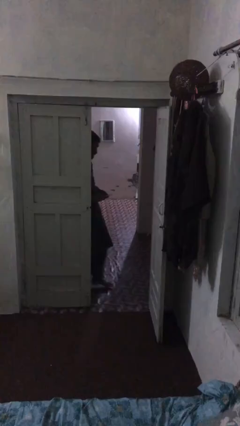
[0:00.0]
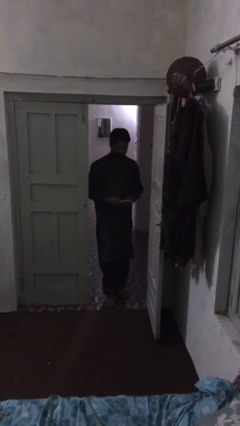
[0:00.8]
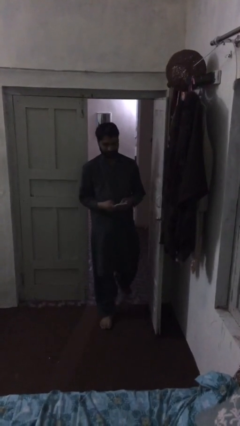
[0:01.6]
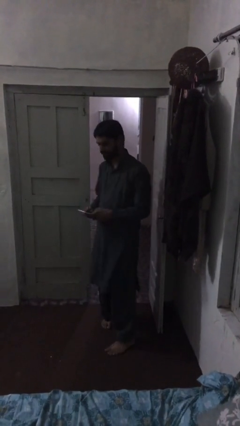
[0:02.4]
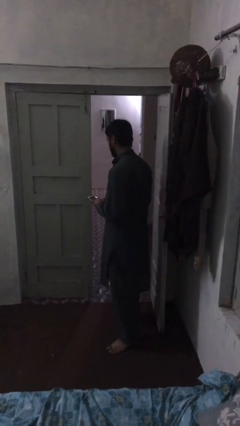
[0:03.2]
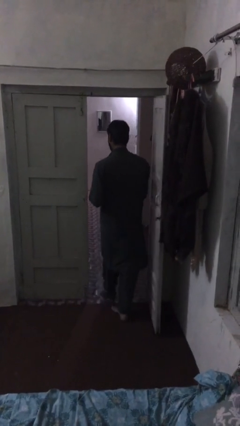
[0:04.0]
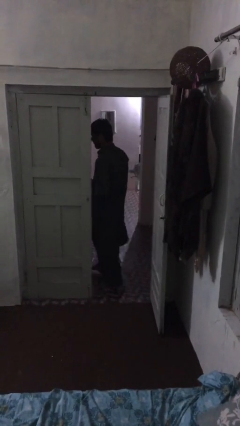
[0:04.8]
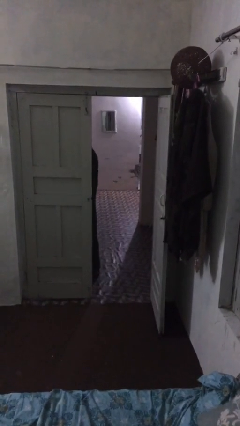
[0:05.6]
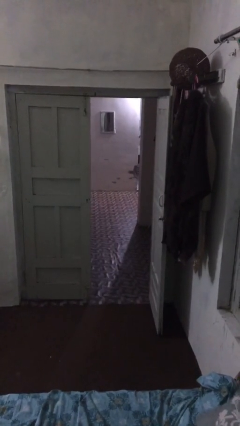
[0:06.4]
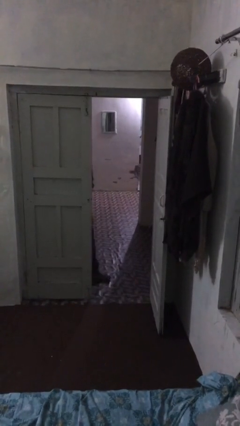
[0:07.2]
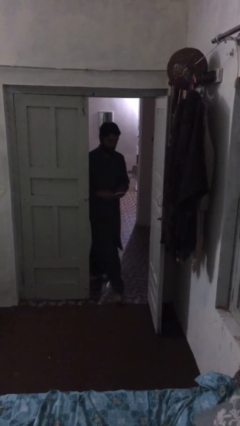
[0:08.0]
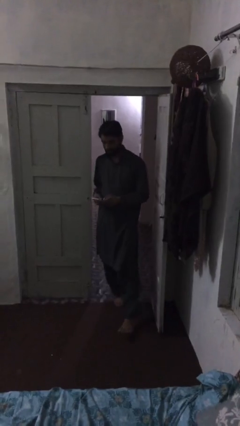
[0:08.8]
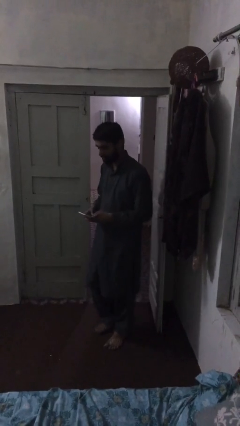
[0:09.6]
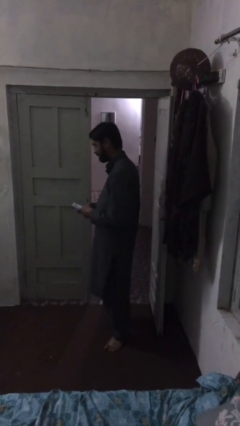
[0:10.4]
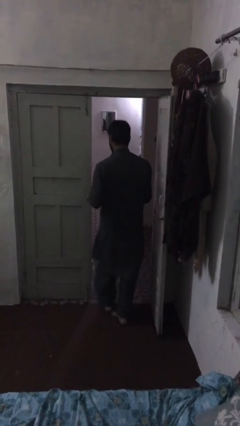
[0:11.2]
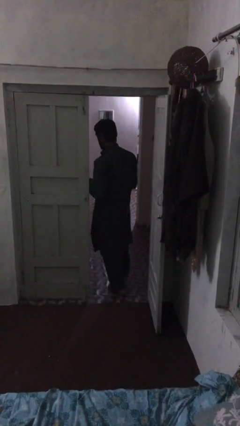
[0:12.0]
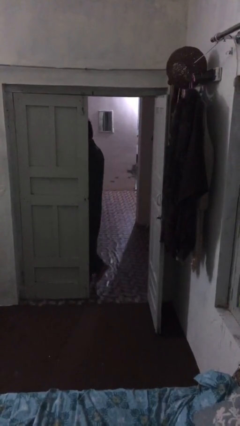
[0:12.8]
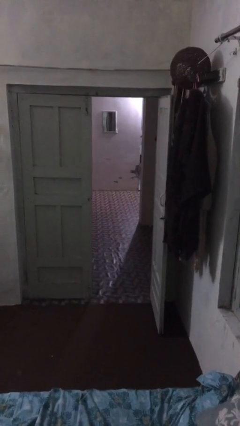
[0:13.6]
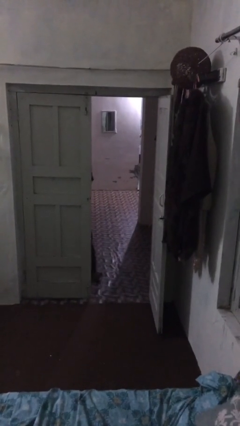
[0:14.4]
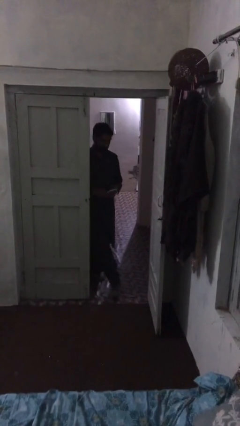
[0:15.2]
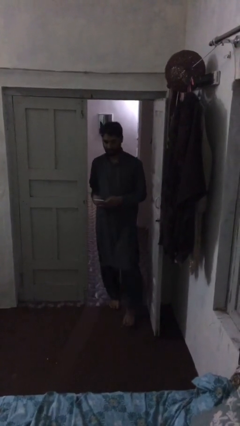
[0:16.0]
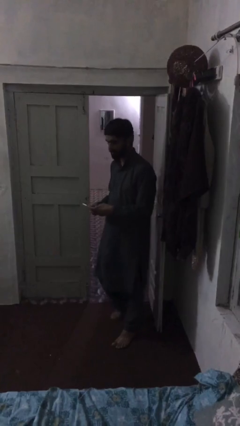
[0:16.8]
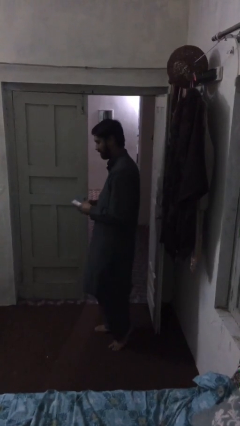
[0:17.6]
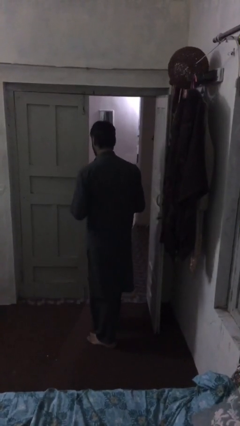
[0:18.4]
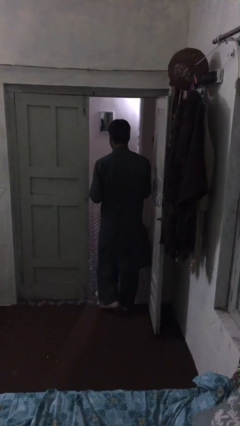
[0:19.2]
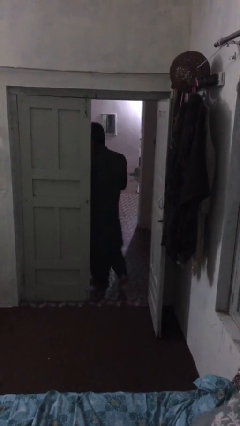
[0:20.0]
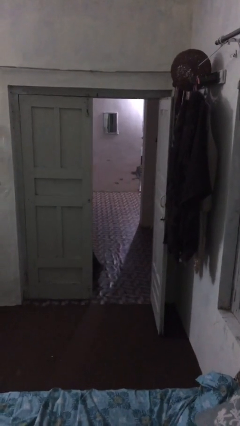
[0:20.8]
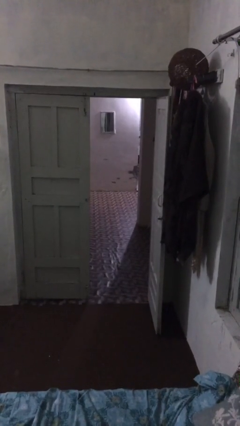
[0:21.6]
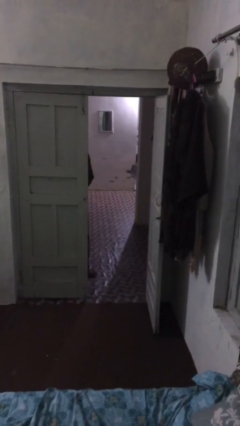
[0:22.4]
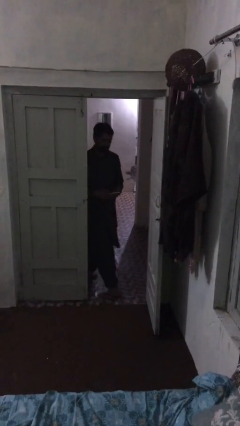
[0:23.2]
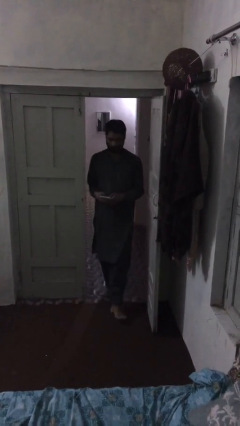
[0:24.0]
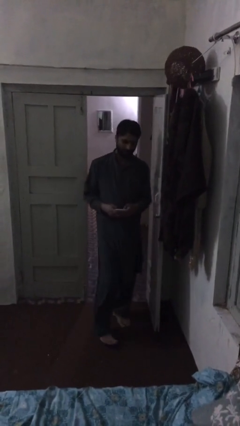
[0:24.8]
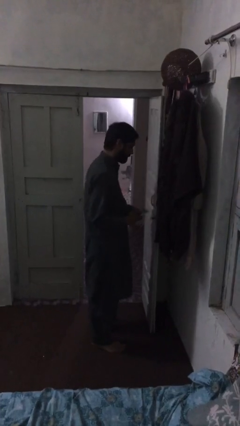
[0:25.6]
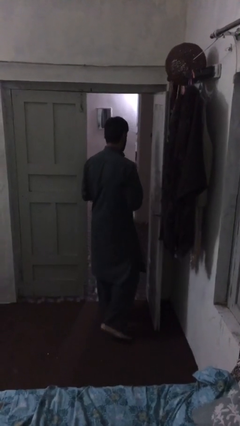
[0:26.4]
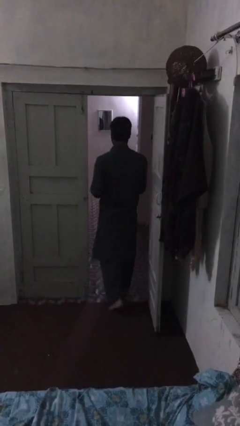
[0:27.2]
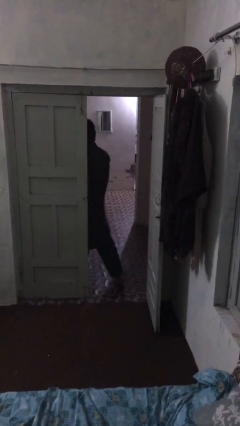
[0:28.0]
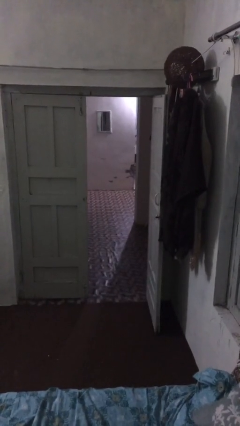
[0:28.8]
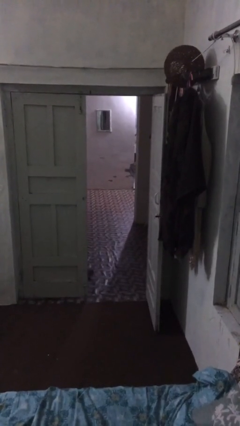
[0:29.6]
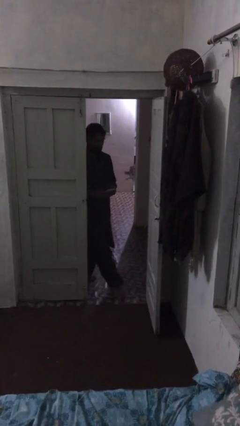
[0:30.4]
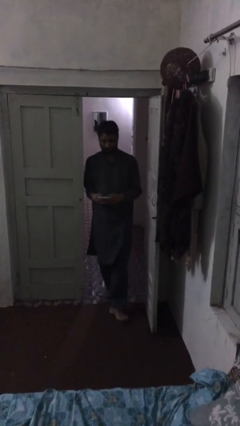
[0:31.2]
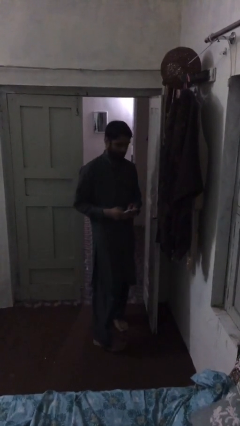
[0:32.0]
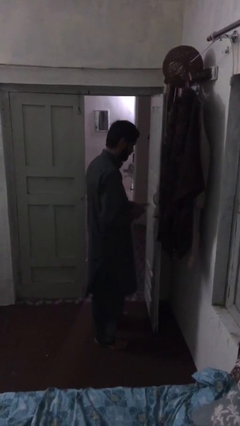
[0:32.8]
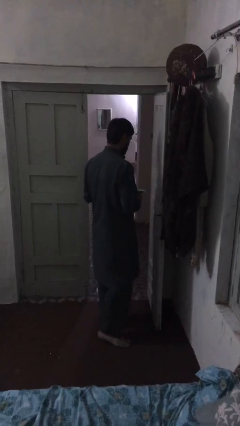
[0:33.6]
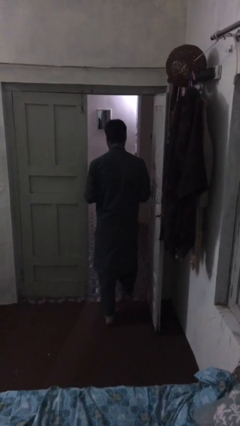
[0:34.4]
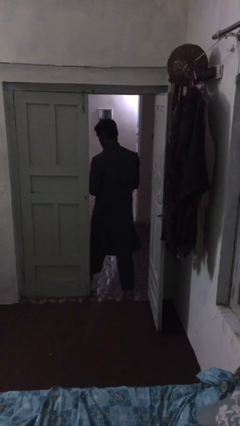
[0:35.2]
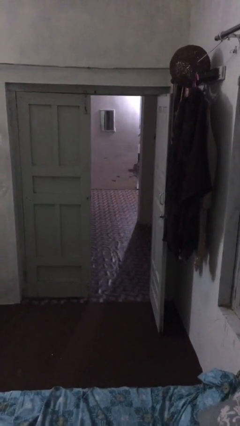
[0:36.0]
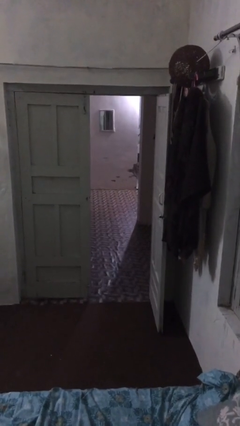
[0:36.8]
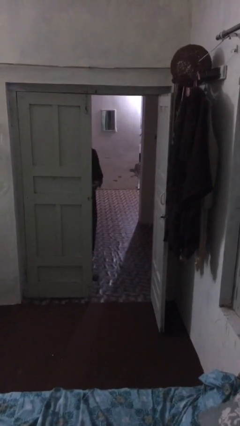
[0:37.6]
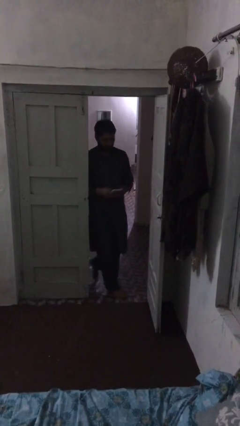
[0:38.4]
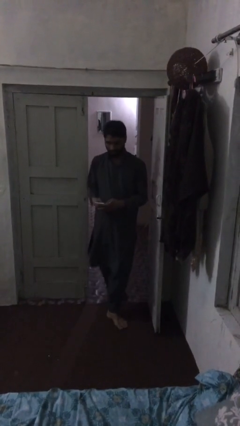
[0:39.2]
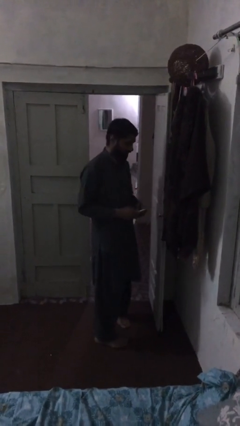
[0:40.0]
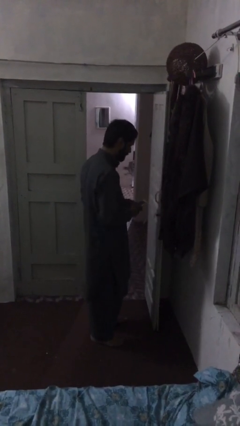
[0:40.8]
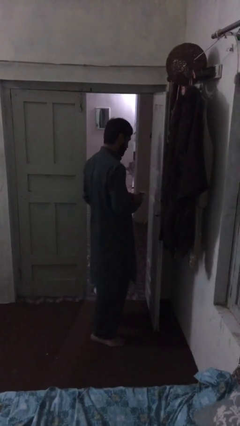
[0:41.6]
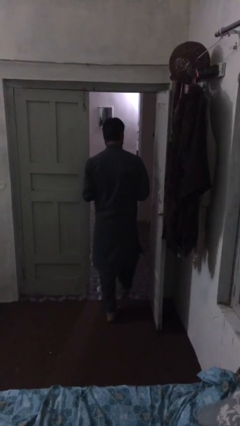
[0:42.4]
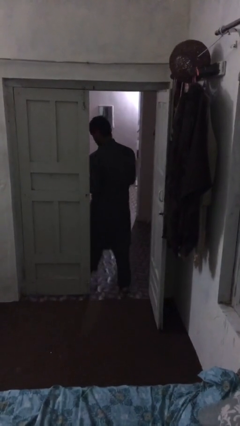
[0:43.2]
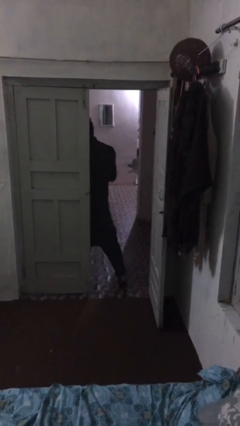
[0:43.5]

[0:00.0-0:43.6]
person texts on phone

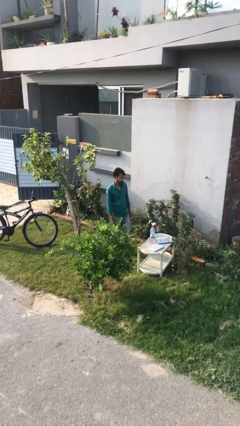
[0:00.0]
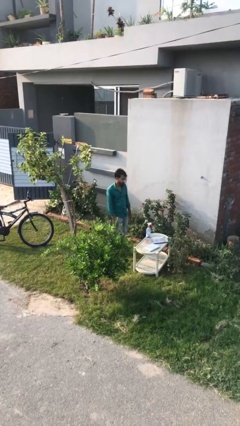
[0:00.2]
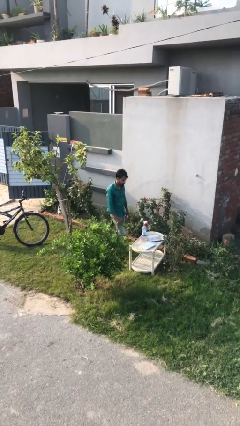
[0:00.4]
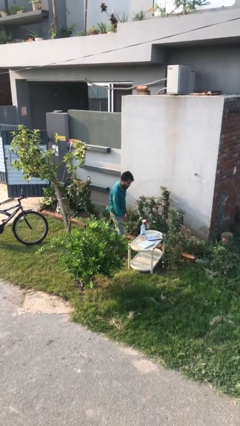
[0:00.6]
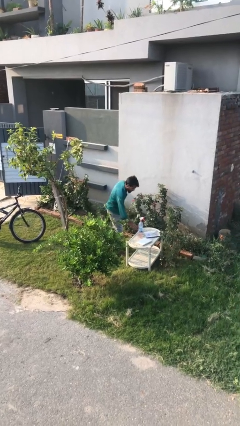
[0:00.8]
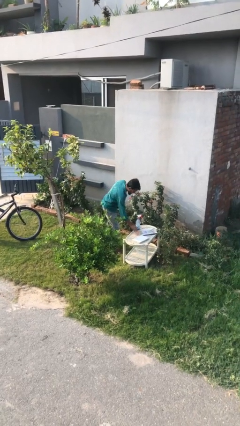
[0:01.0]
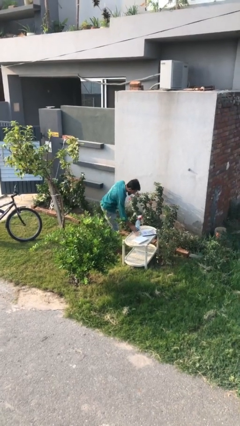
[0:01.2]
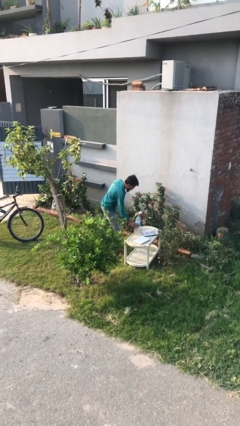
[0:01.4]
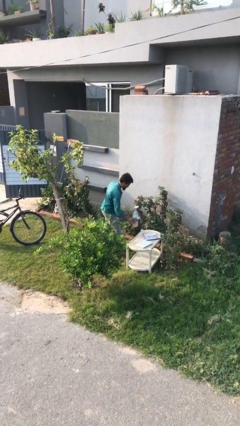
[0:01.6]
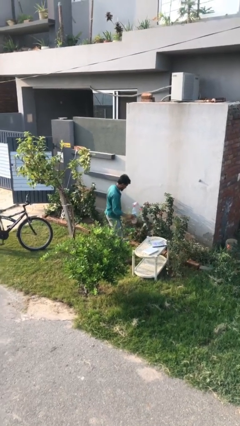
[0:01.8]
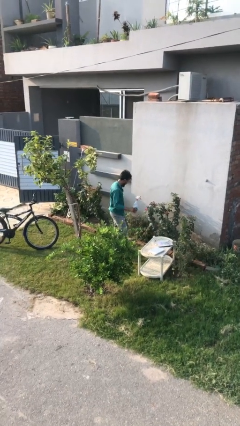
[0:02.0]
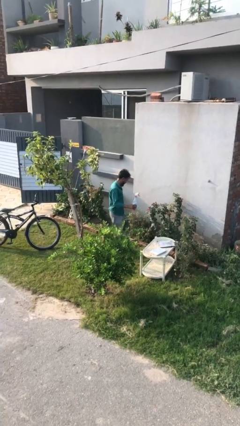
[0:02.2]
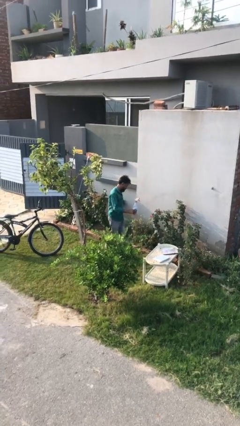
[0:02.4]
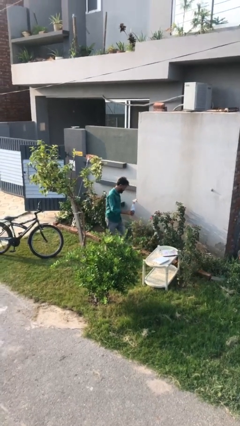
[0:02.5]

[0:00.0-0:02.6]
person picks up object from table

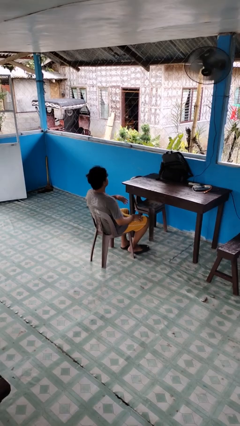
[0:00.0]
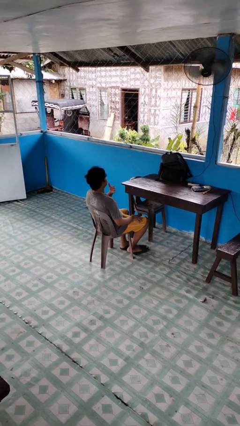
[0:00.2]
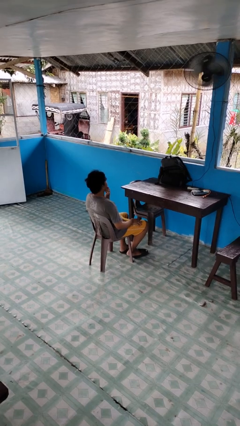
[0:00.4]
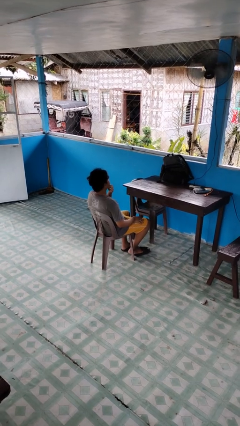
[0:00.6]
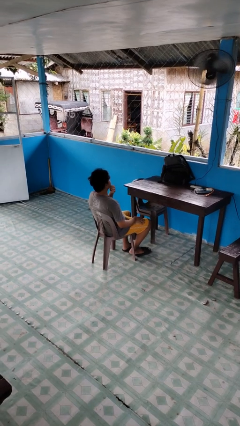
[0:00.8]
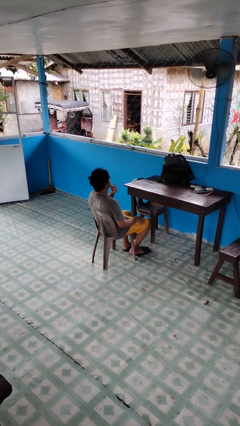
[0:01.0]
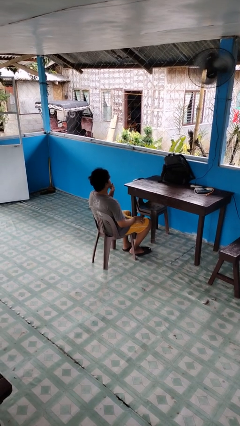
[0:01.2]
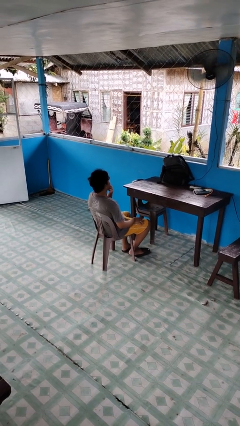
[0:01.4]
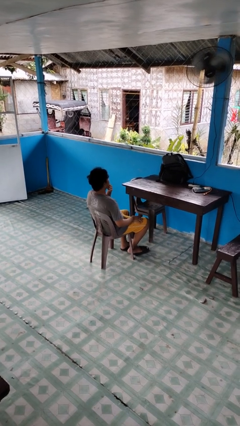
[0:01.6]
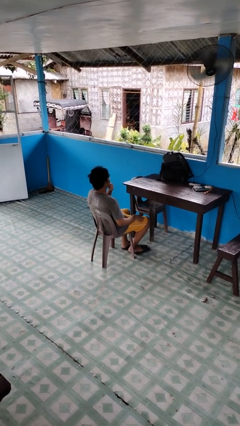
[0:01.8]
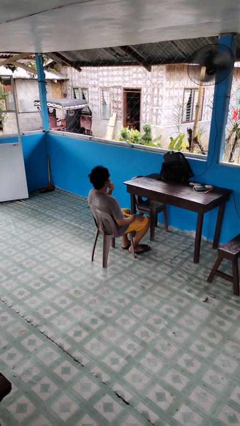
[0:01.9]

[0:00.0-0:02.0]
person strokes chin

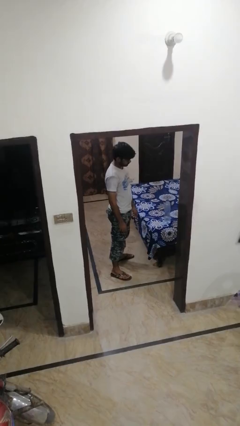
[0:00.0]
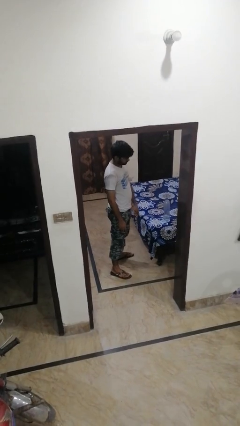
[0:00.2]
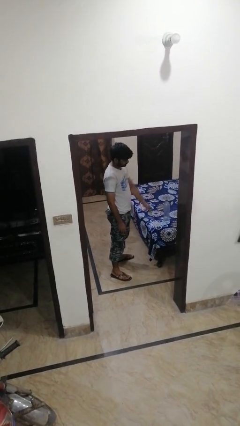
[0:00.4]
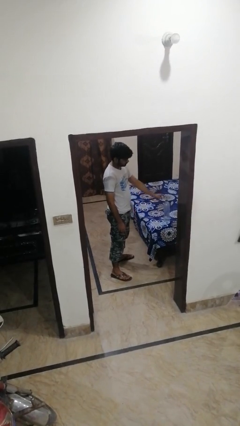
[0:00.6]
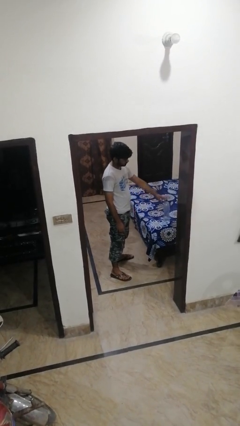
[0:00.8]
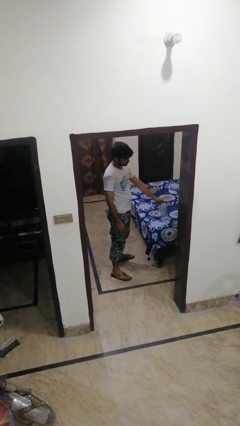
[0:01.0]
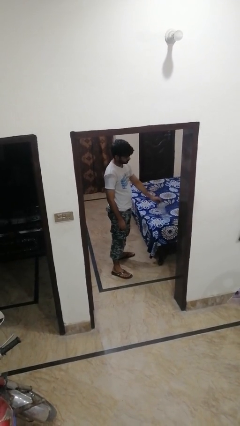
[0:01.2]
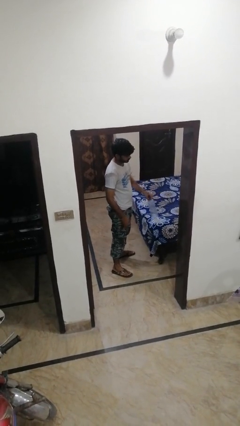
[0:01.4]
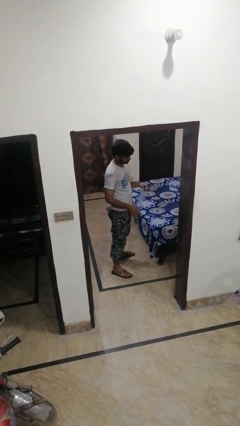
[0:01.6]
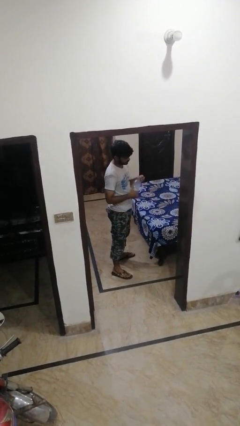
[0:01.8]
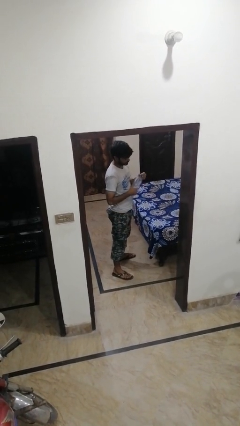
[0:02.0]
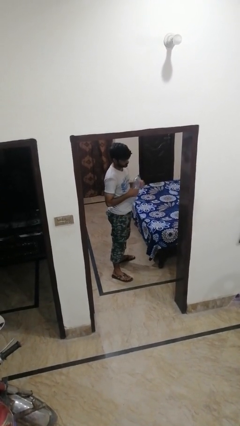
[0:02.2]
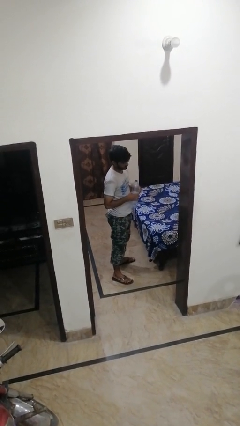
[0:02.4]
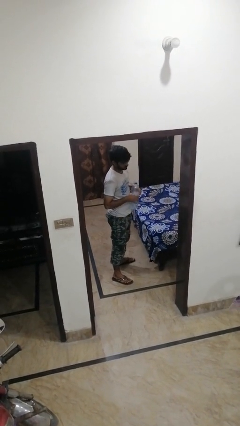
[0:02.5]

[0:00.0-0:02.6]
person picks up object from bed
